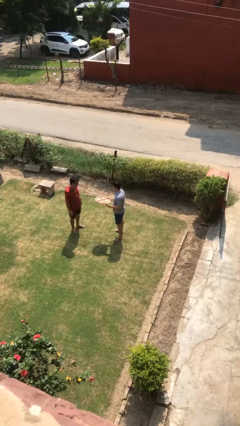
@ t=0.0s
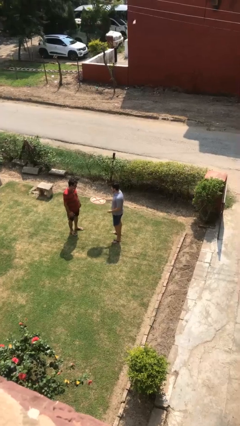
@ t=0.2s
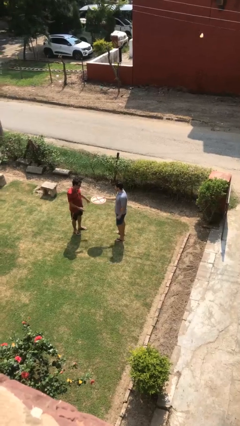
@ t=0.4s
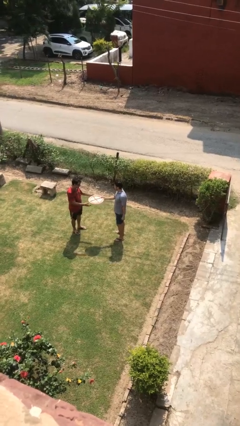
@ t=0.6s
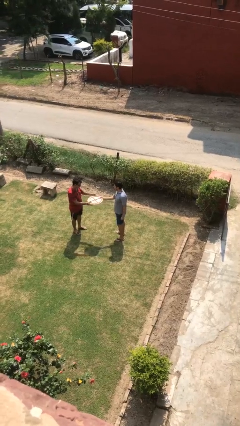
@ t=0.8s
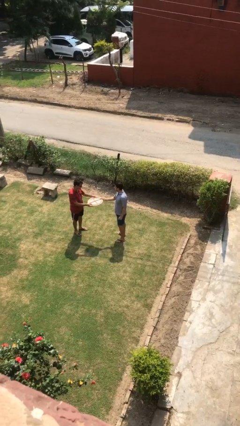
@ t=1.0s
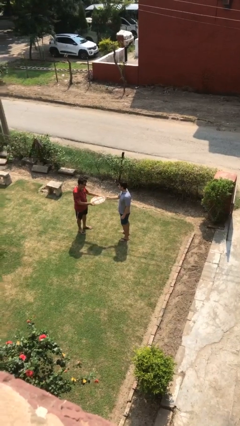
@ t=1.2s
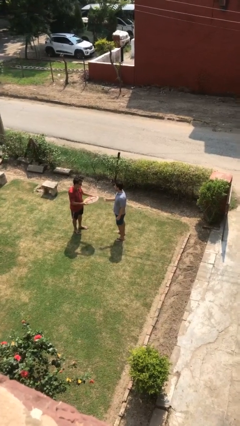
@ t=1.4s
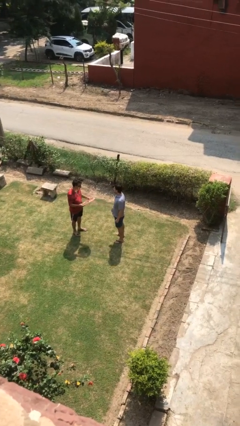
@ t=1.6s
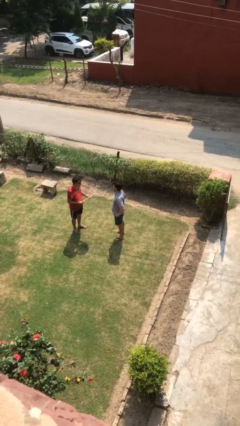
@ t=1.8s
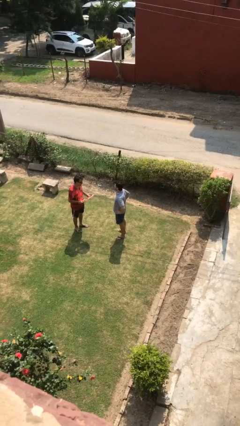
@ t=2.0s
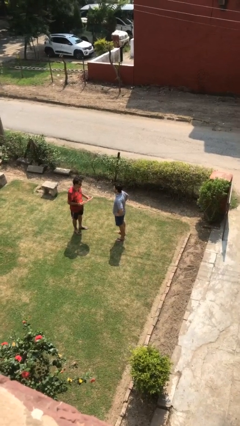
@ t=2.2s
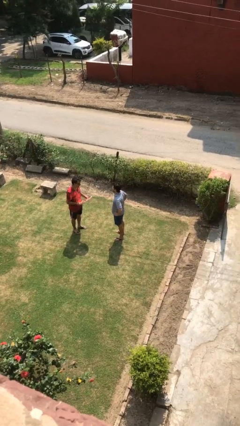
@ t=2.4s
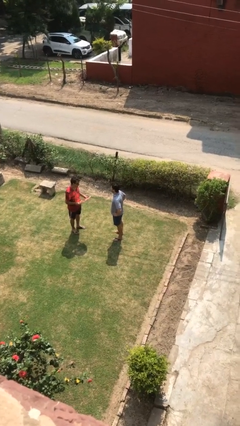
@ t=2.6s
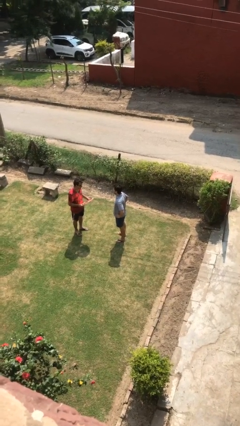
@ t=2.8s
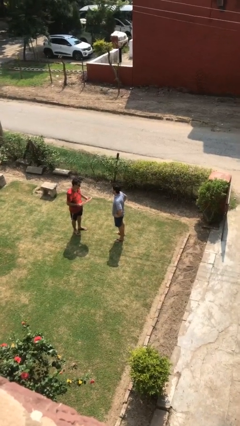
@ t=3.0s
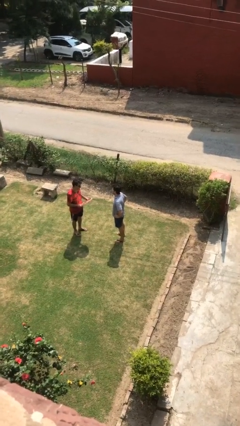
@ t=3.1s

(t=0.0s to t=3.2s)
person transfers object to person

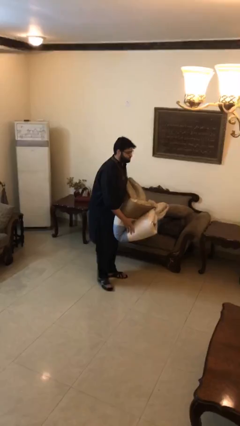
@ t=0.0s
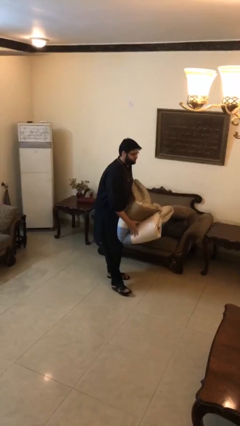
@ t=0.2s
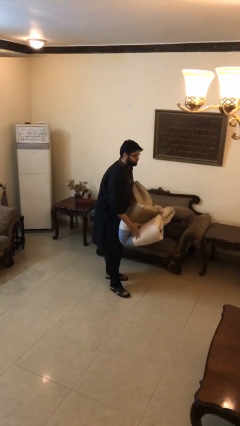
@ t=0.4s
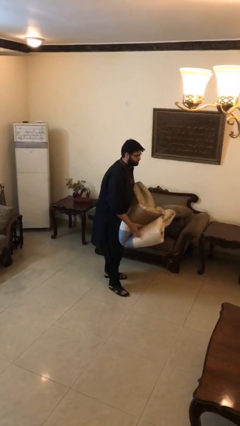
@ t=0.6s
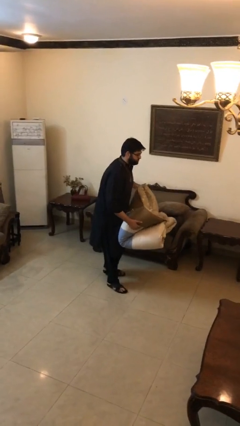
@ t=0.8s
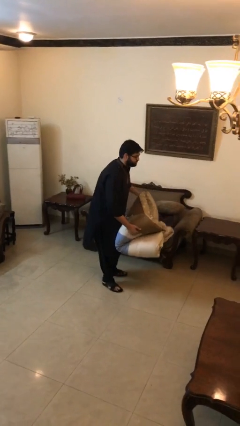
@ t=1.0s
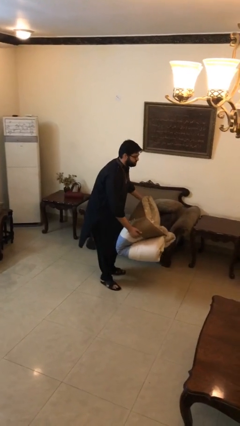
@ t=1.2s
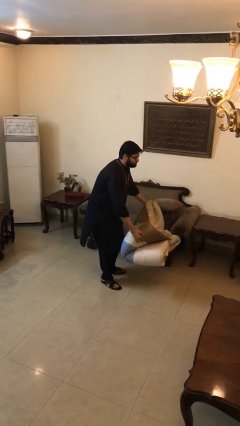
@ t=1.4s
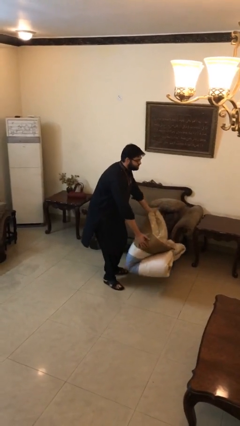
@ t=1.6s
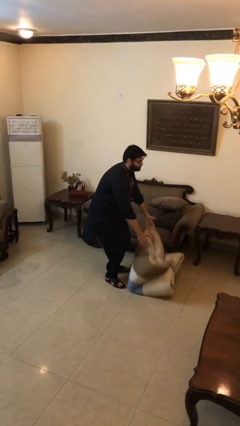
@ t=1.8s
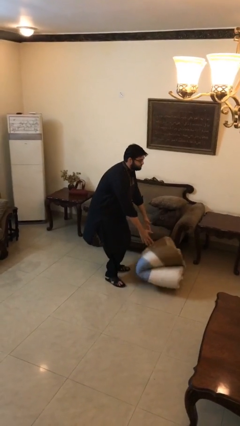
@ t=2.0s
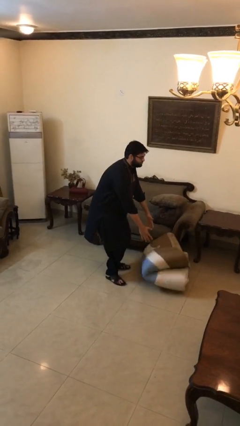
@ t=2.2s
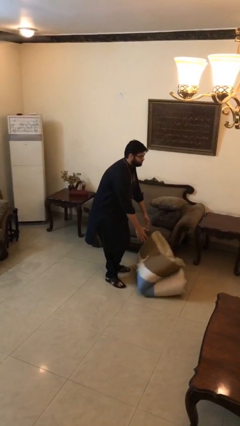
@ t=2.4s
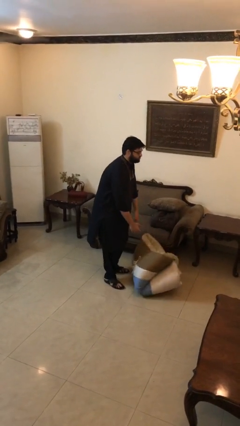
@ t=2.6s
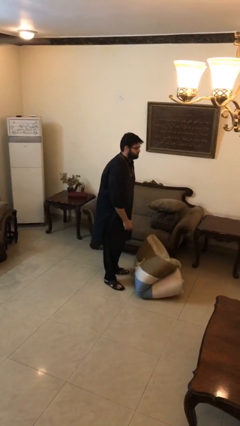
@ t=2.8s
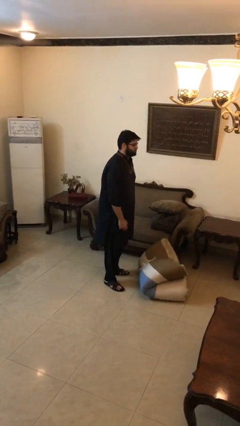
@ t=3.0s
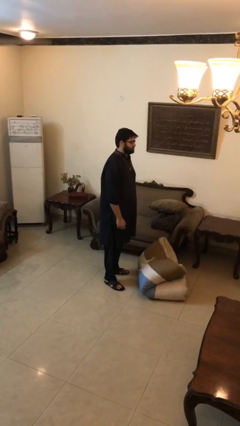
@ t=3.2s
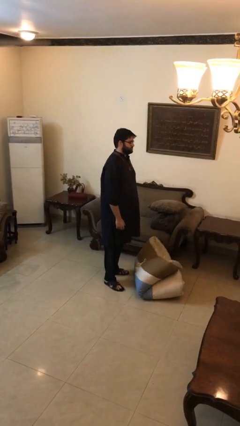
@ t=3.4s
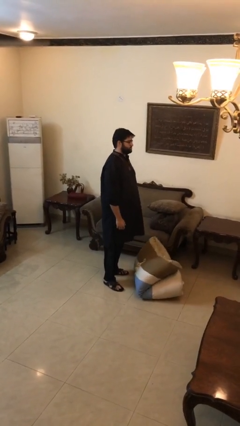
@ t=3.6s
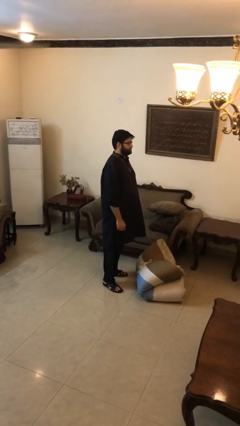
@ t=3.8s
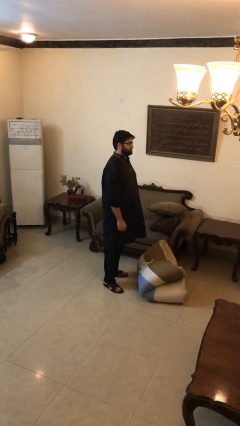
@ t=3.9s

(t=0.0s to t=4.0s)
person puts down object on floor

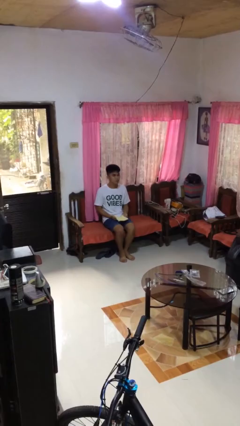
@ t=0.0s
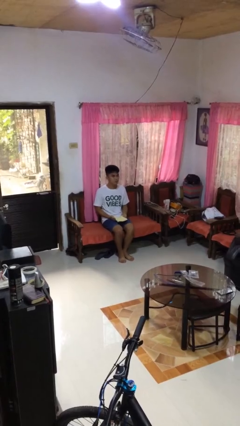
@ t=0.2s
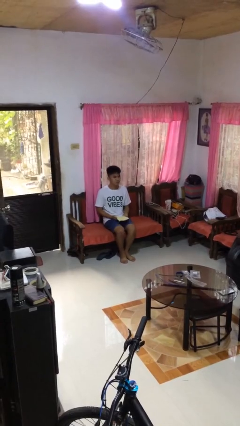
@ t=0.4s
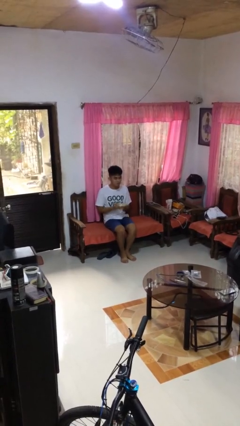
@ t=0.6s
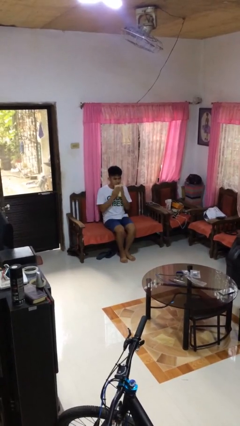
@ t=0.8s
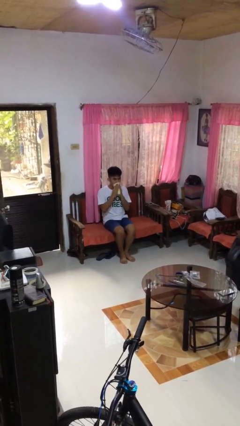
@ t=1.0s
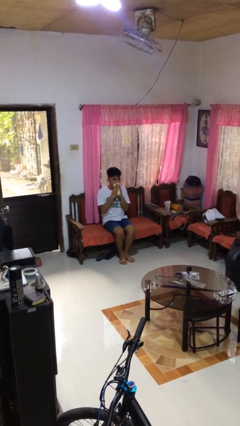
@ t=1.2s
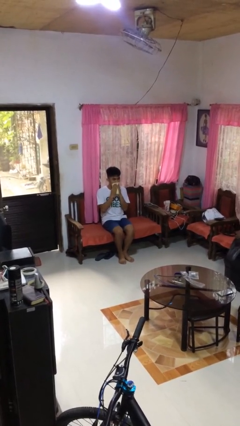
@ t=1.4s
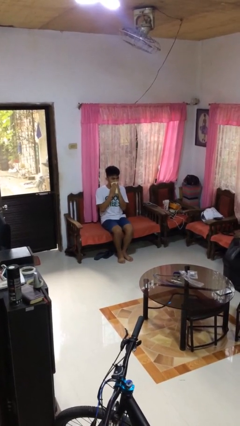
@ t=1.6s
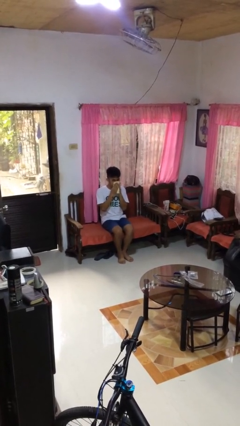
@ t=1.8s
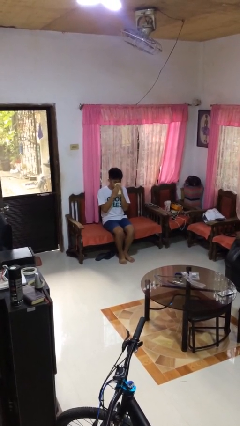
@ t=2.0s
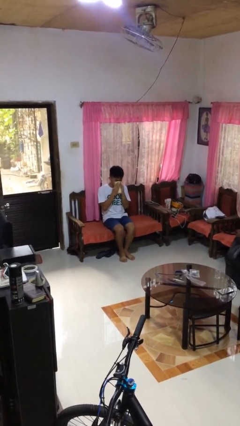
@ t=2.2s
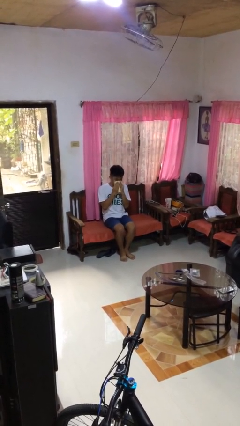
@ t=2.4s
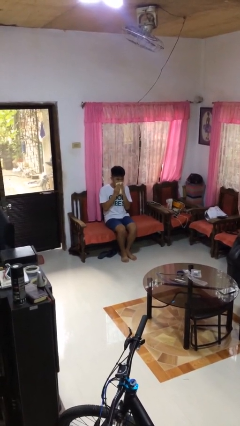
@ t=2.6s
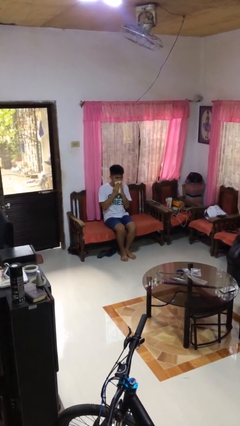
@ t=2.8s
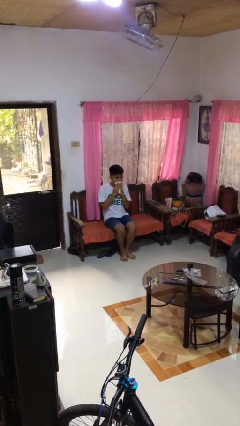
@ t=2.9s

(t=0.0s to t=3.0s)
person wipes mouth with napkin

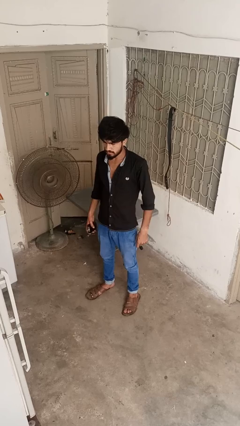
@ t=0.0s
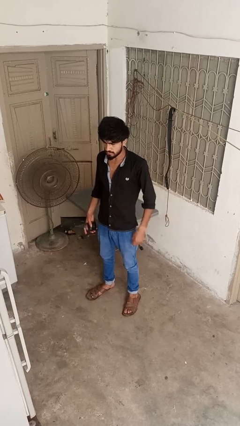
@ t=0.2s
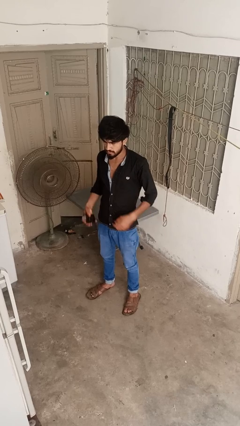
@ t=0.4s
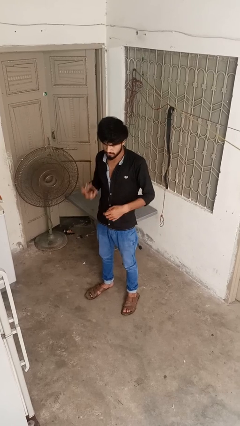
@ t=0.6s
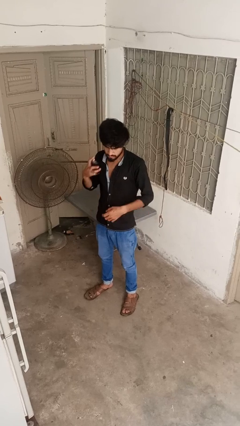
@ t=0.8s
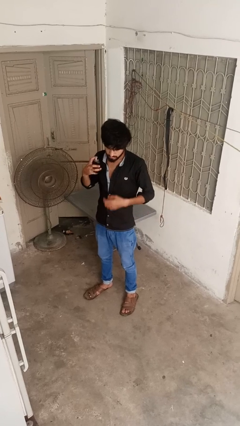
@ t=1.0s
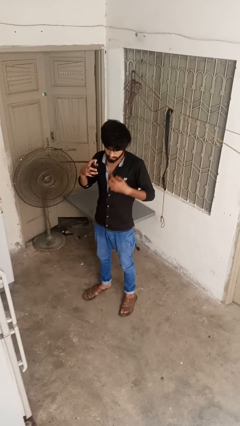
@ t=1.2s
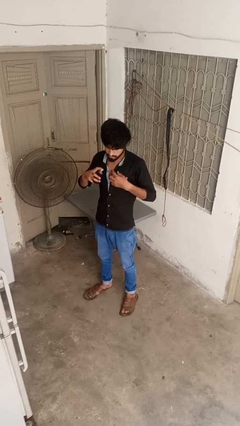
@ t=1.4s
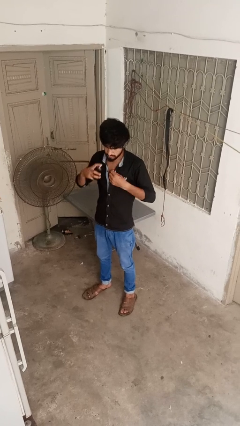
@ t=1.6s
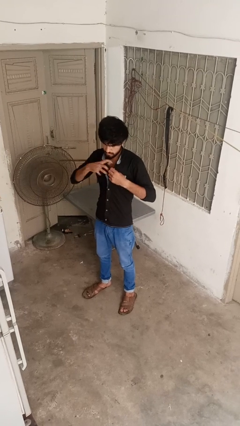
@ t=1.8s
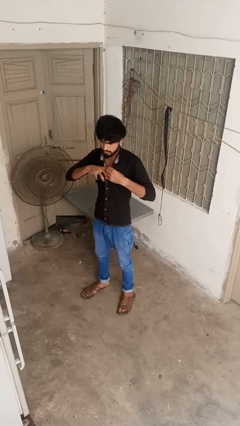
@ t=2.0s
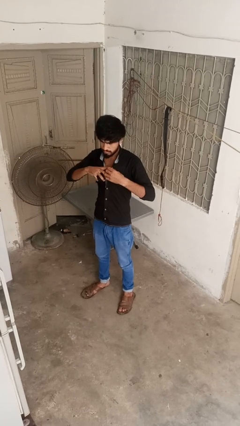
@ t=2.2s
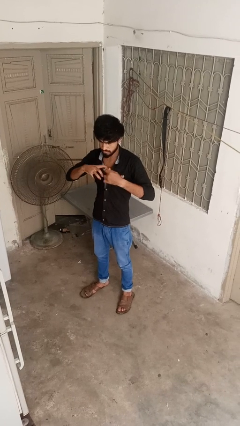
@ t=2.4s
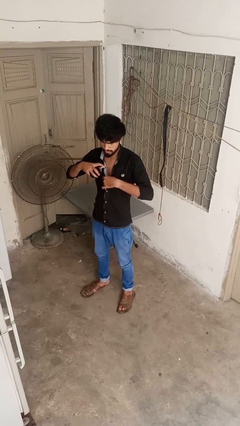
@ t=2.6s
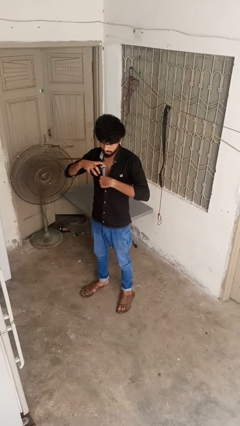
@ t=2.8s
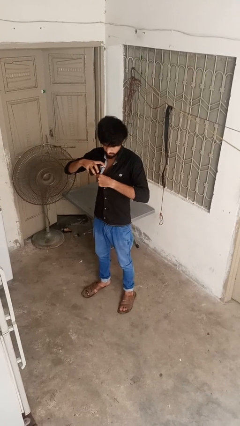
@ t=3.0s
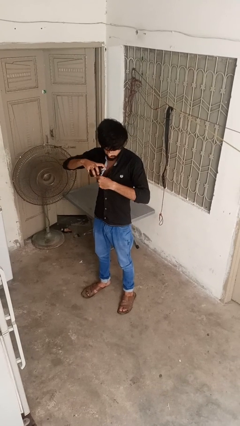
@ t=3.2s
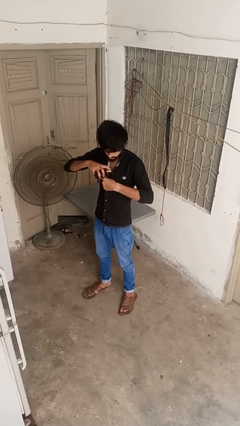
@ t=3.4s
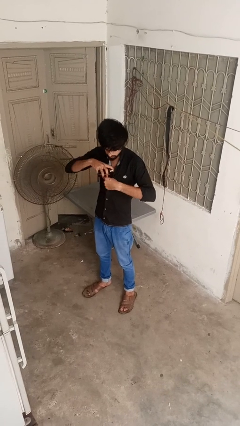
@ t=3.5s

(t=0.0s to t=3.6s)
person applies deodorant

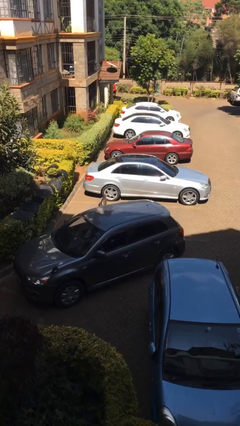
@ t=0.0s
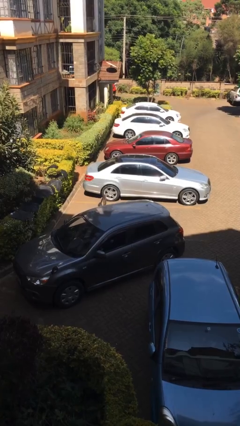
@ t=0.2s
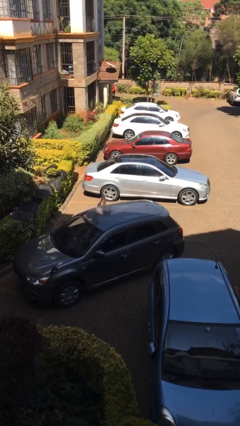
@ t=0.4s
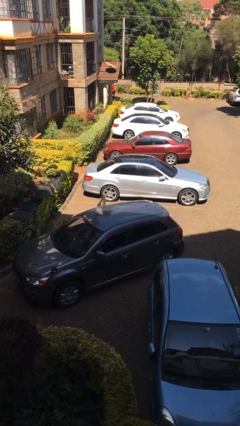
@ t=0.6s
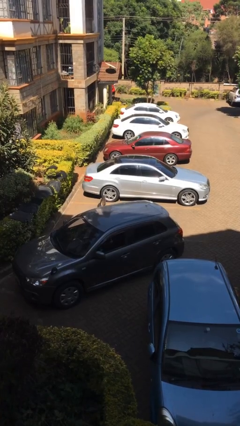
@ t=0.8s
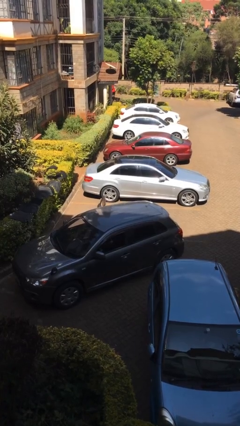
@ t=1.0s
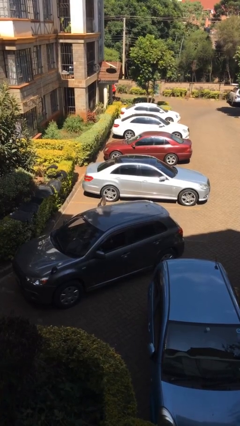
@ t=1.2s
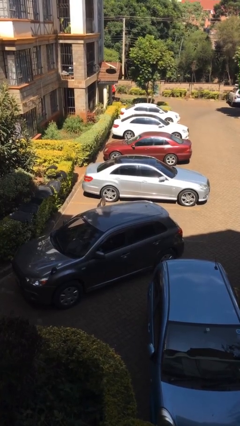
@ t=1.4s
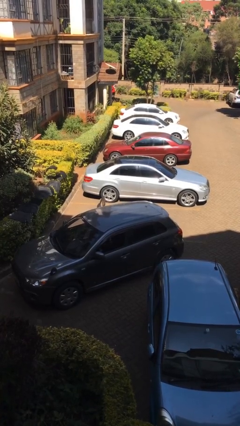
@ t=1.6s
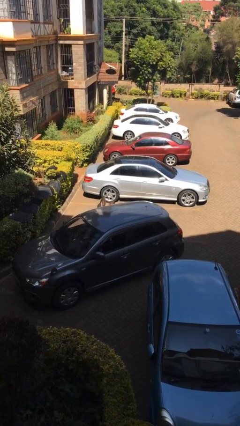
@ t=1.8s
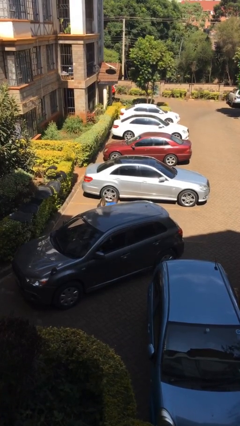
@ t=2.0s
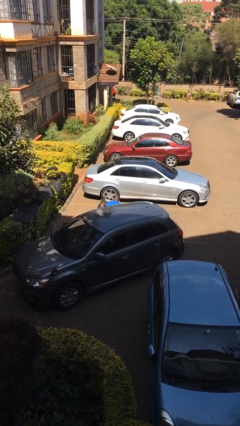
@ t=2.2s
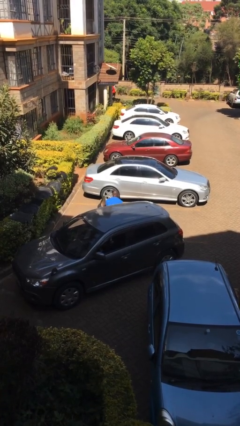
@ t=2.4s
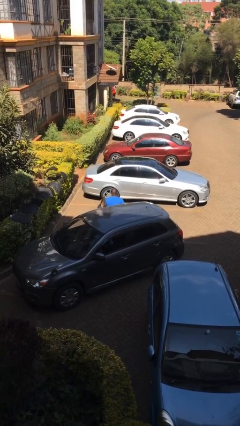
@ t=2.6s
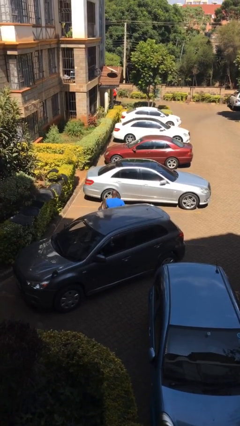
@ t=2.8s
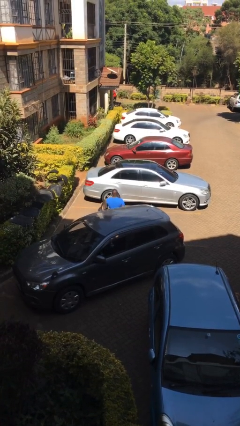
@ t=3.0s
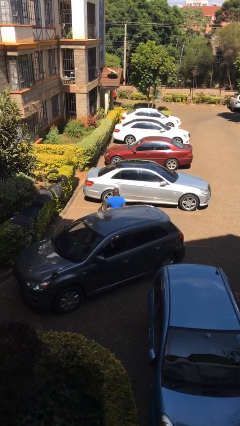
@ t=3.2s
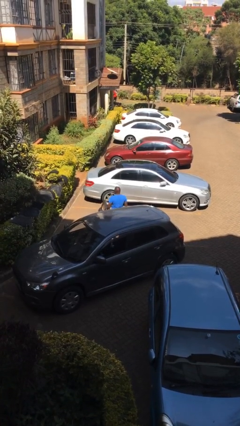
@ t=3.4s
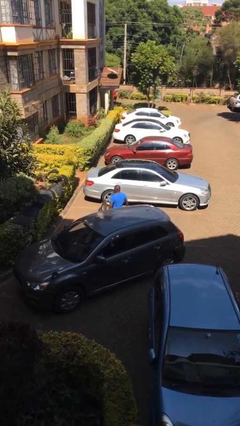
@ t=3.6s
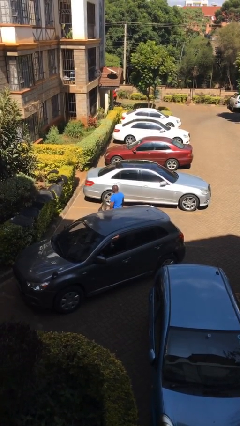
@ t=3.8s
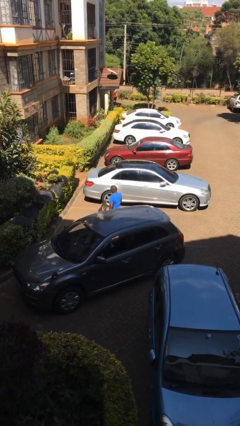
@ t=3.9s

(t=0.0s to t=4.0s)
person exits car
